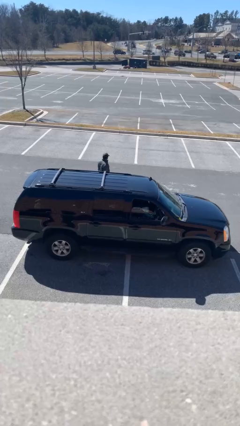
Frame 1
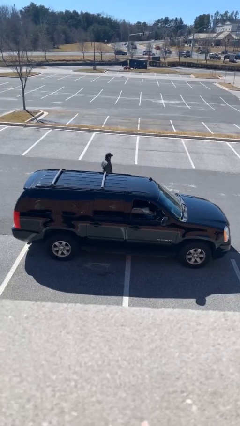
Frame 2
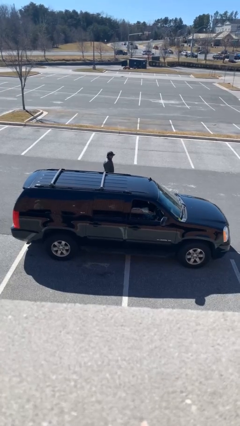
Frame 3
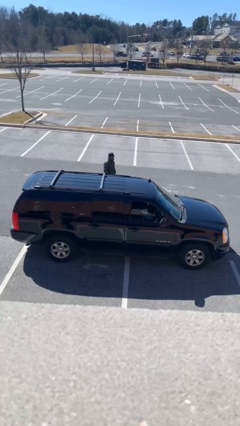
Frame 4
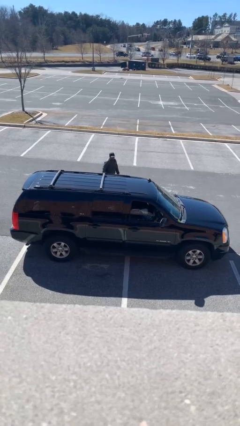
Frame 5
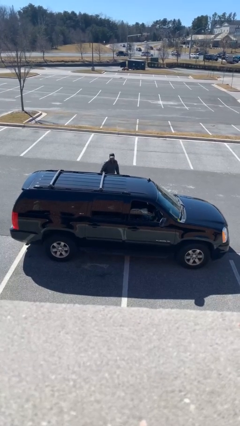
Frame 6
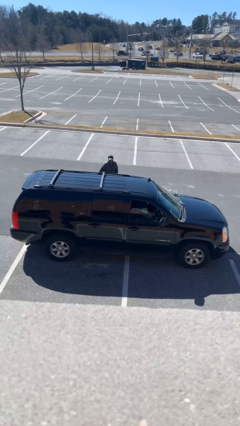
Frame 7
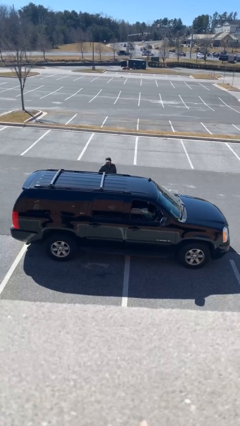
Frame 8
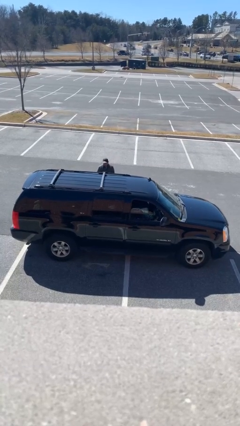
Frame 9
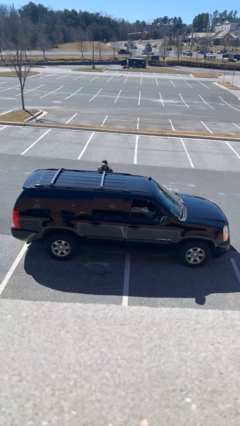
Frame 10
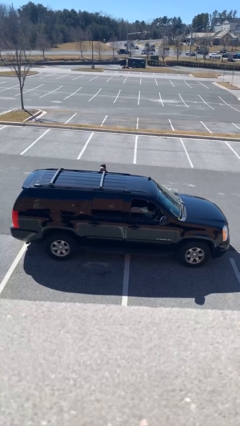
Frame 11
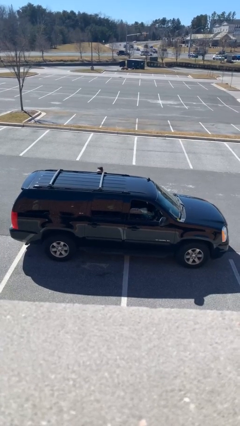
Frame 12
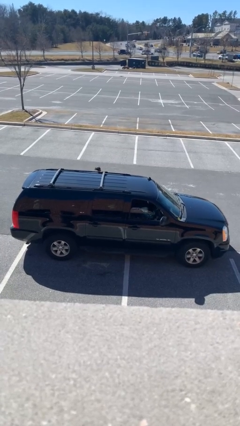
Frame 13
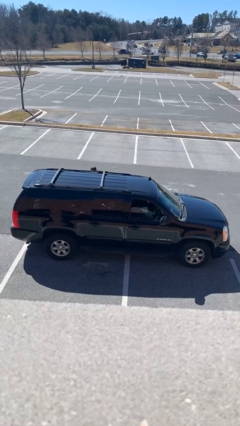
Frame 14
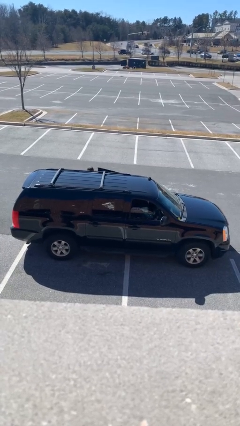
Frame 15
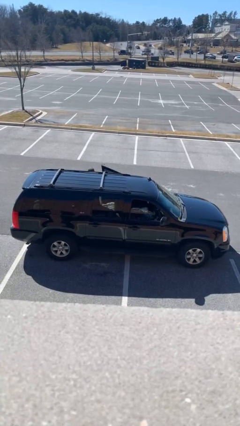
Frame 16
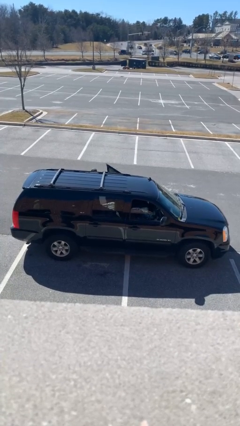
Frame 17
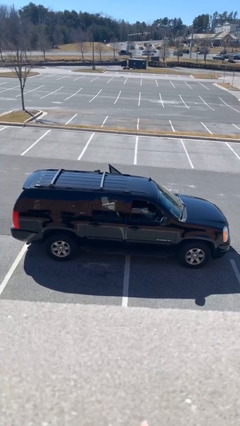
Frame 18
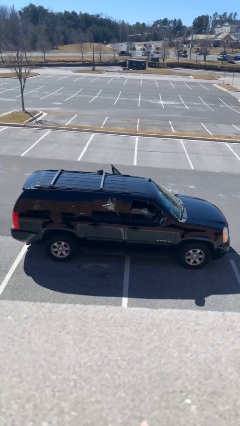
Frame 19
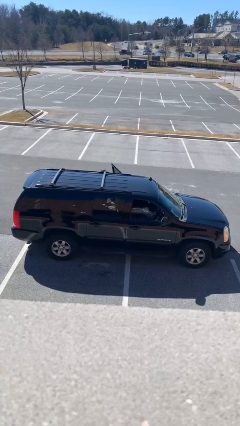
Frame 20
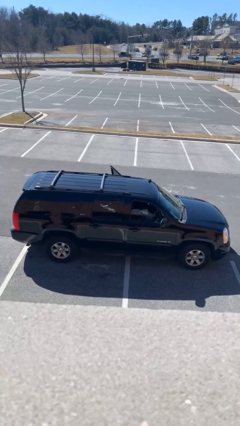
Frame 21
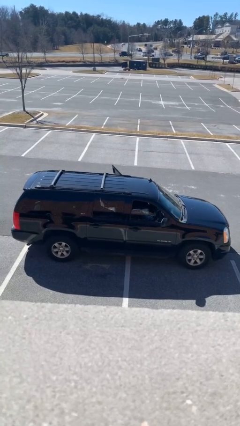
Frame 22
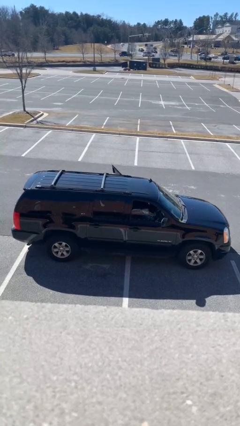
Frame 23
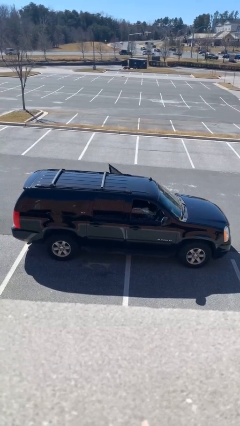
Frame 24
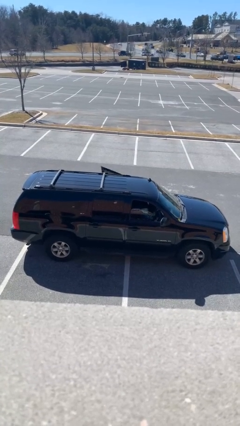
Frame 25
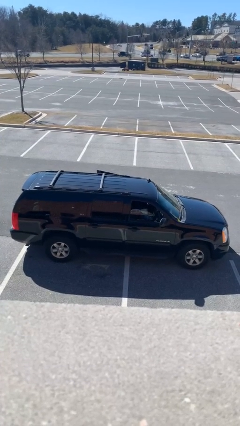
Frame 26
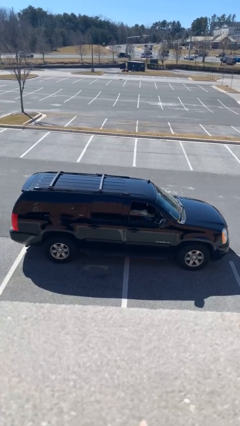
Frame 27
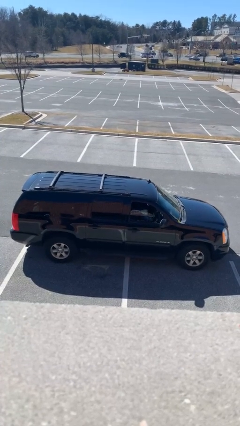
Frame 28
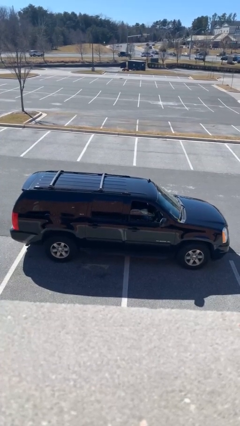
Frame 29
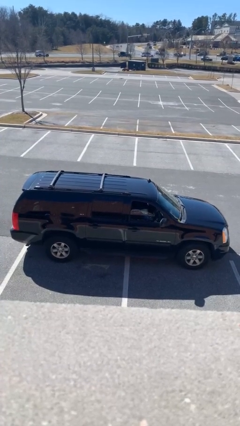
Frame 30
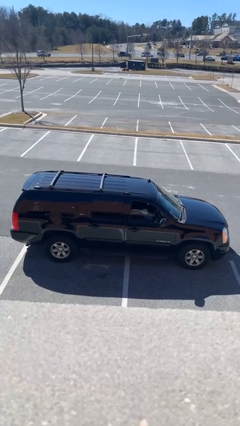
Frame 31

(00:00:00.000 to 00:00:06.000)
car picks up person

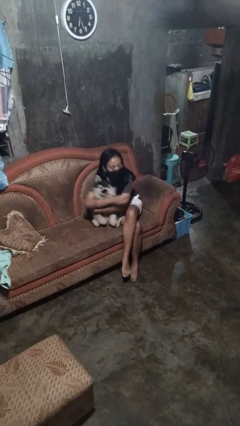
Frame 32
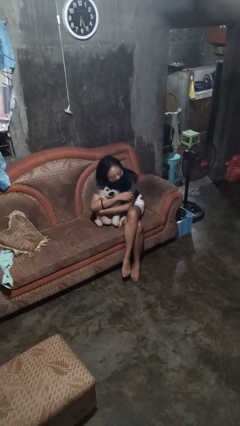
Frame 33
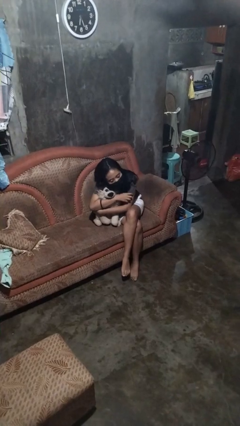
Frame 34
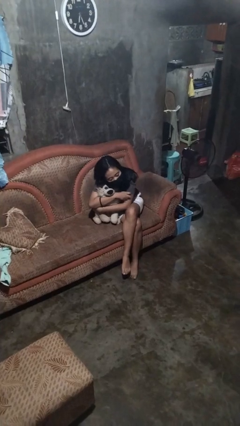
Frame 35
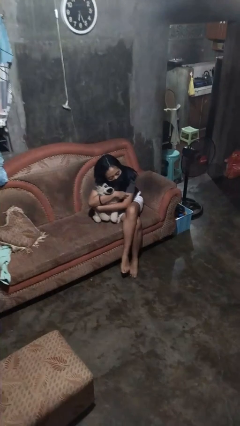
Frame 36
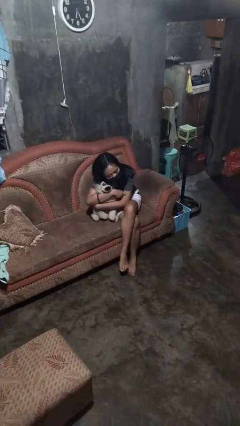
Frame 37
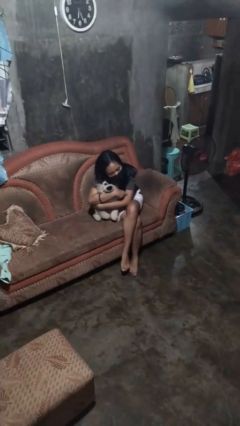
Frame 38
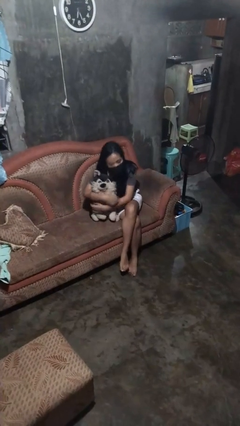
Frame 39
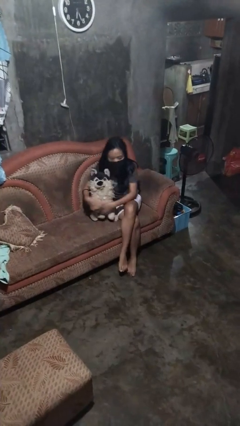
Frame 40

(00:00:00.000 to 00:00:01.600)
person hugs stuffed animal

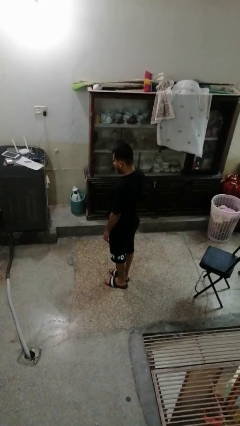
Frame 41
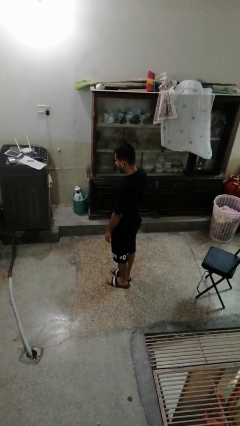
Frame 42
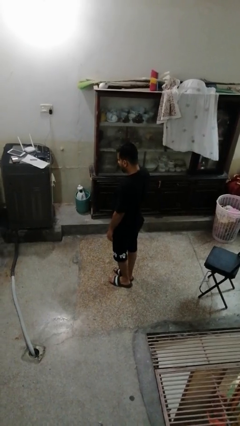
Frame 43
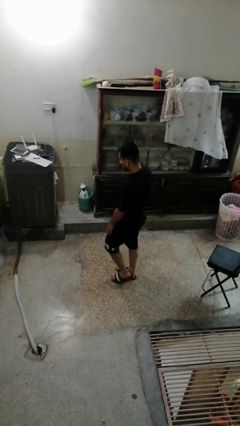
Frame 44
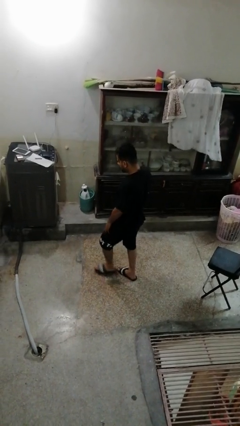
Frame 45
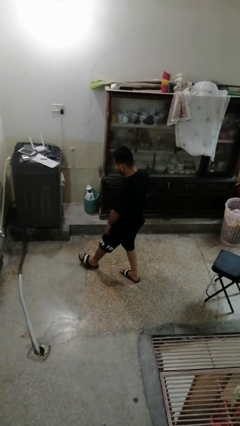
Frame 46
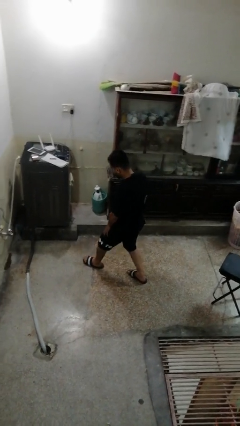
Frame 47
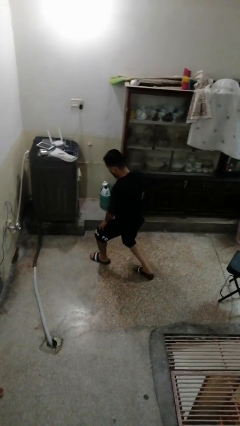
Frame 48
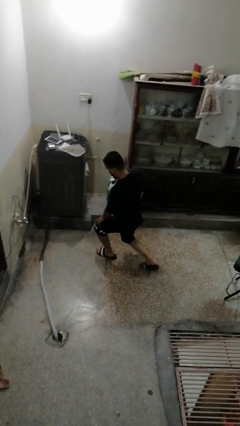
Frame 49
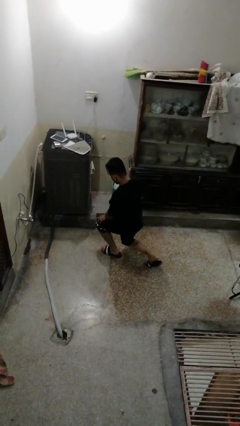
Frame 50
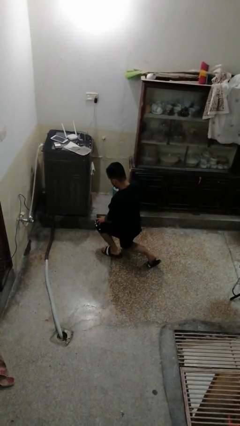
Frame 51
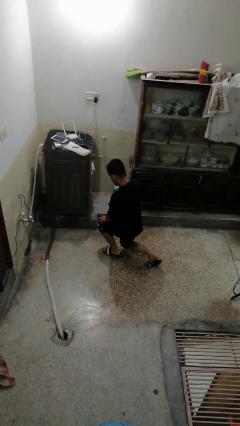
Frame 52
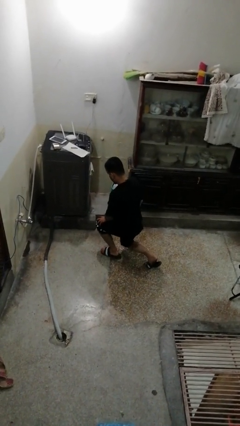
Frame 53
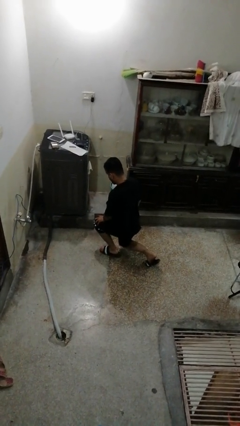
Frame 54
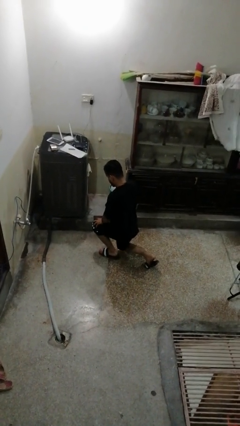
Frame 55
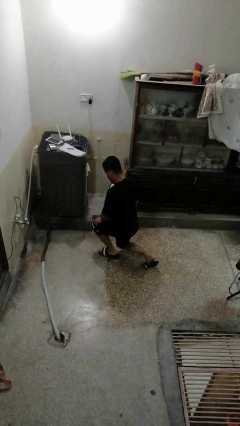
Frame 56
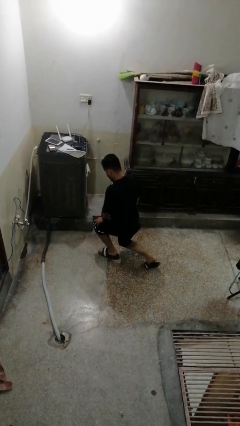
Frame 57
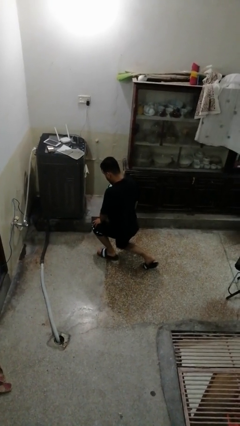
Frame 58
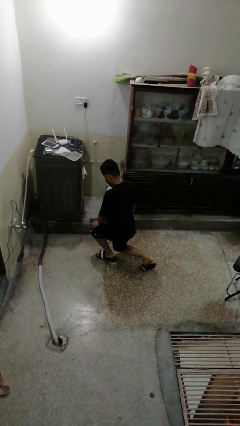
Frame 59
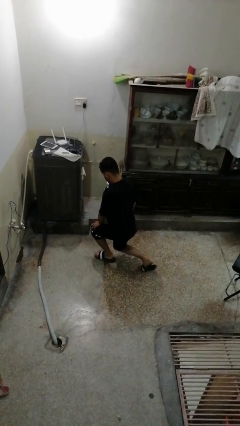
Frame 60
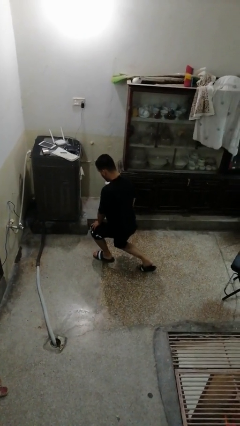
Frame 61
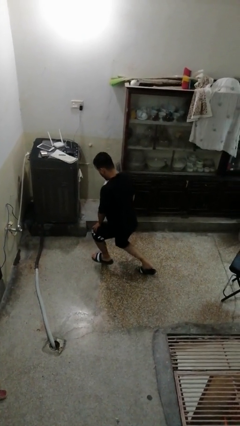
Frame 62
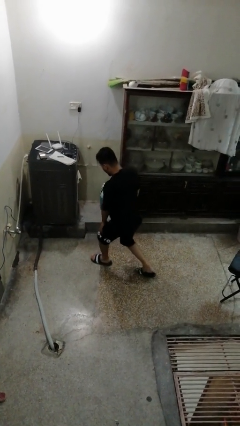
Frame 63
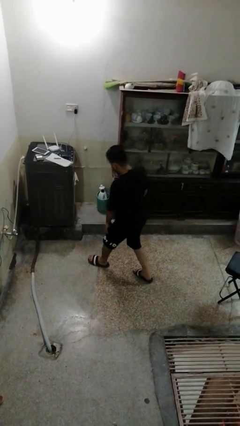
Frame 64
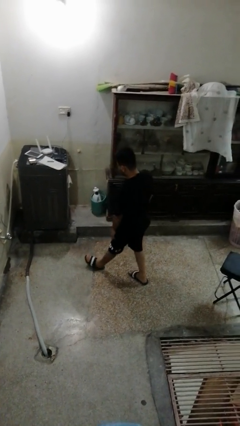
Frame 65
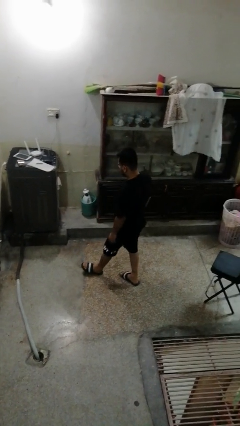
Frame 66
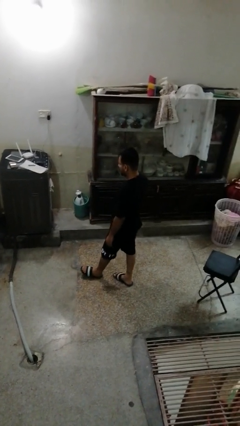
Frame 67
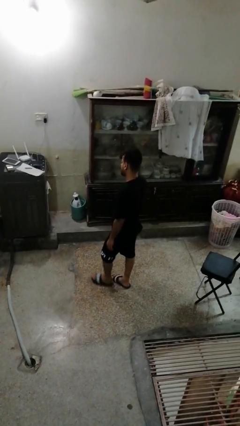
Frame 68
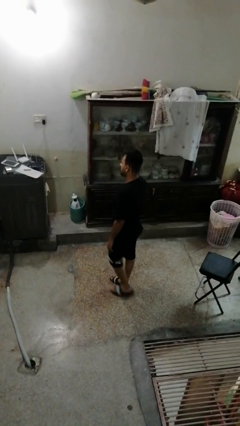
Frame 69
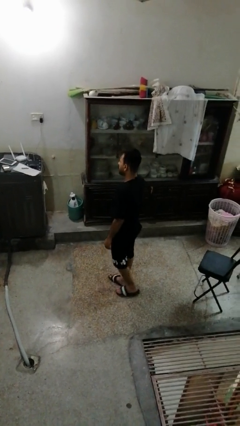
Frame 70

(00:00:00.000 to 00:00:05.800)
person exercises with lunges

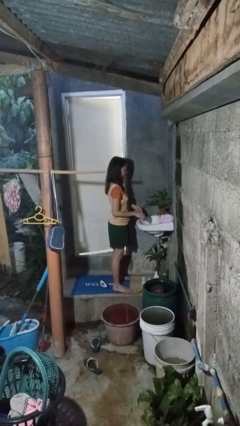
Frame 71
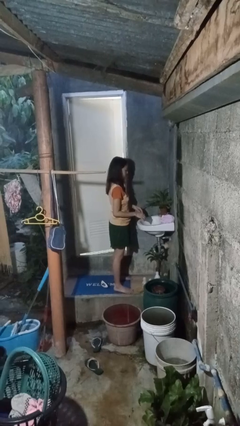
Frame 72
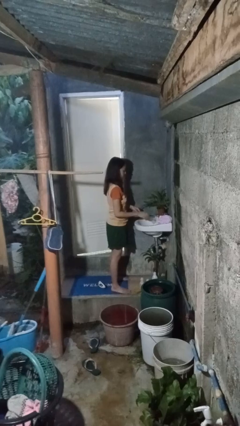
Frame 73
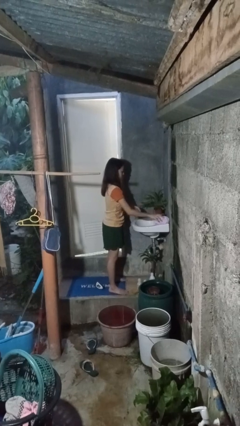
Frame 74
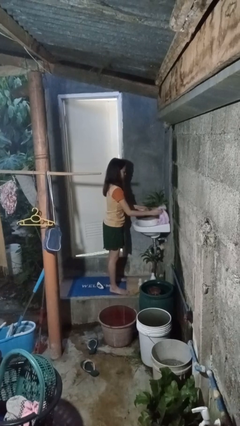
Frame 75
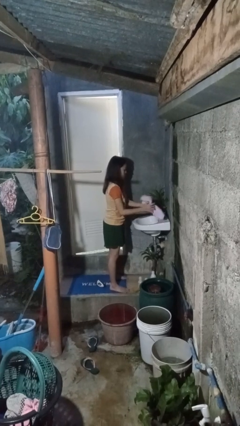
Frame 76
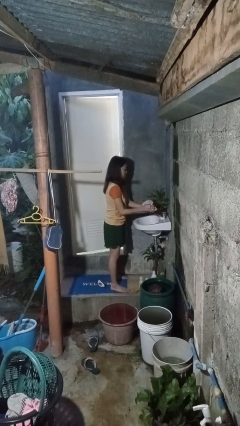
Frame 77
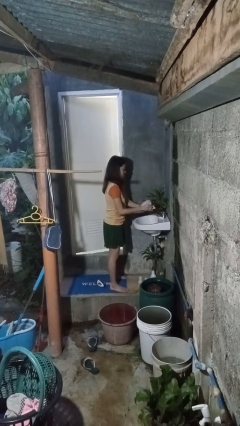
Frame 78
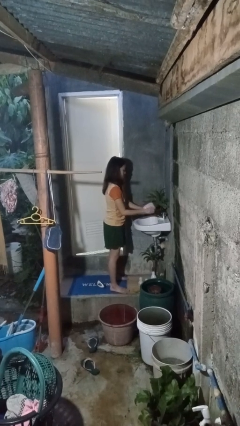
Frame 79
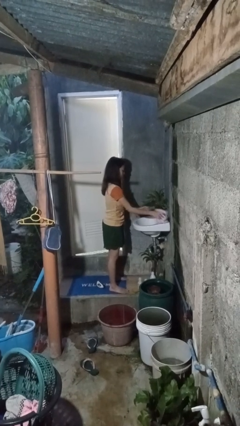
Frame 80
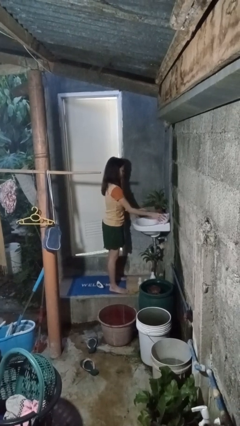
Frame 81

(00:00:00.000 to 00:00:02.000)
person dries hands with towel

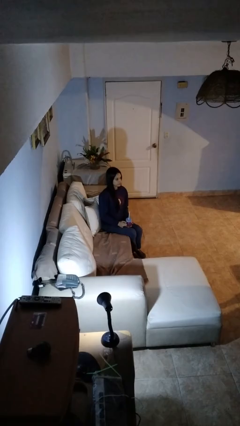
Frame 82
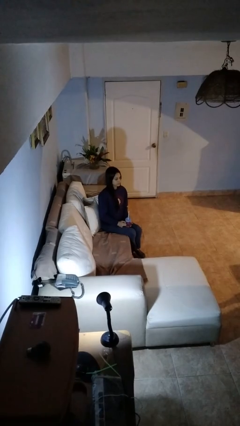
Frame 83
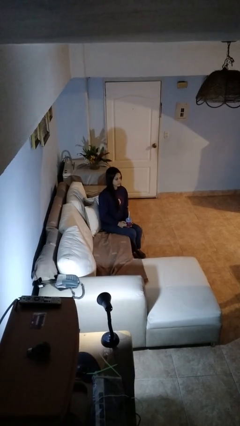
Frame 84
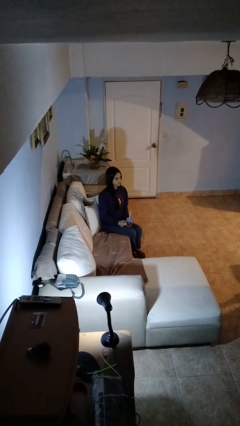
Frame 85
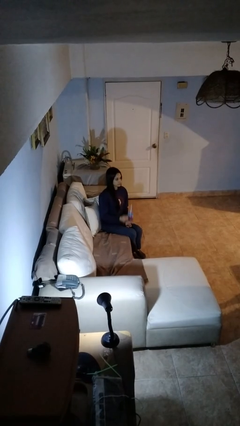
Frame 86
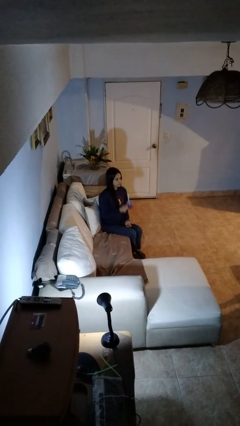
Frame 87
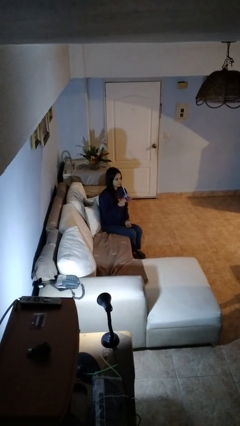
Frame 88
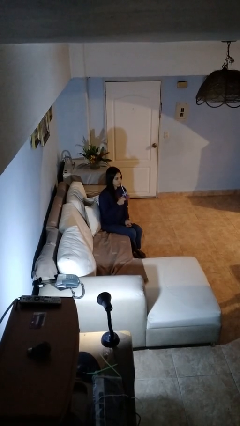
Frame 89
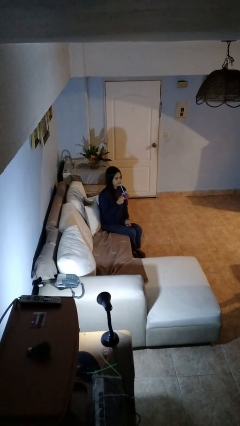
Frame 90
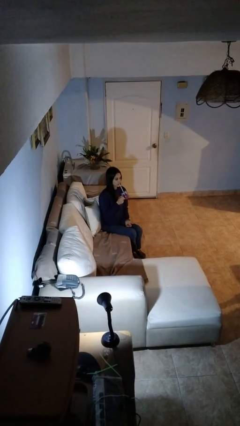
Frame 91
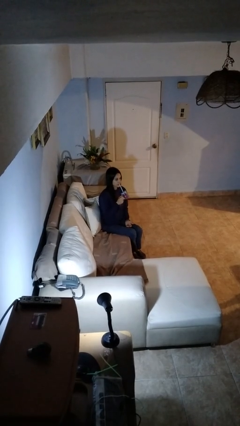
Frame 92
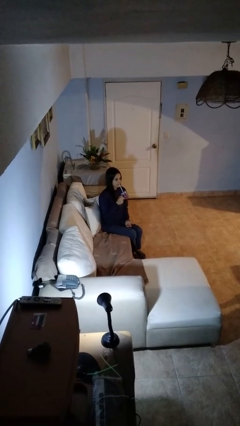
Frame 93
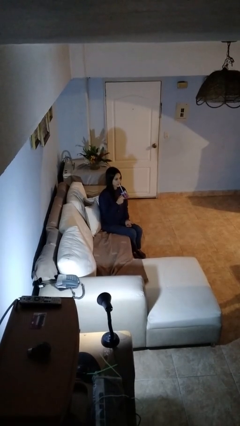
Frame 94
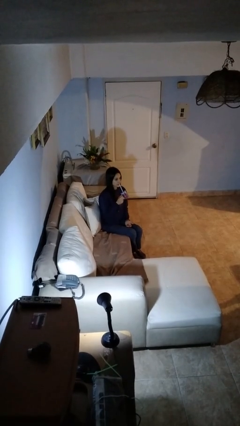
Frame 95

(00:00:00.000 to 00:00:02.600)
person drinks from straw
